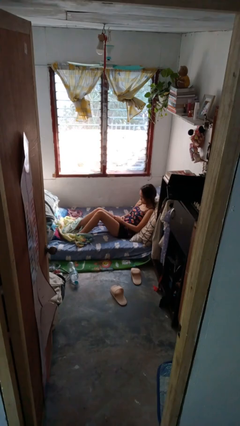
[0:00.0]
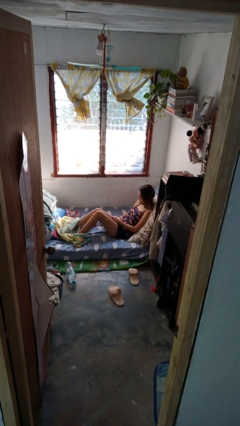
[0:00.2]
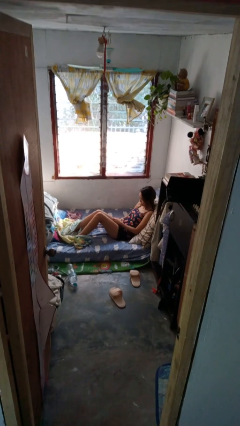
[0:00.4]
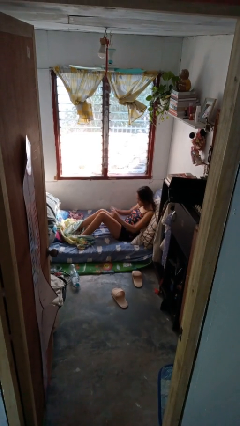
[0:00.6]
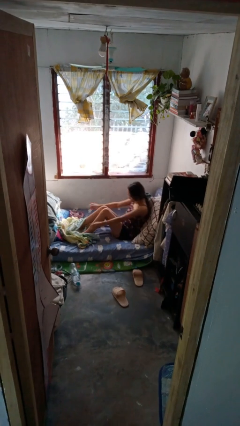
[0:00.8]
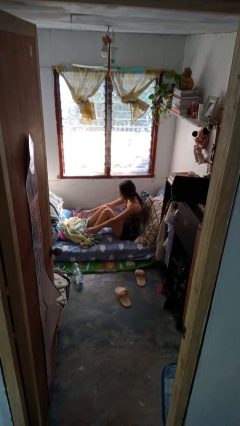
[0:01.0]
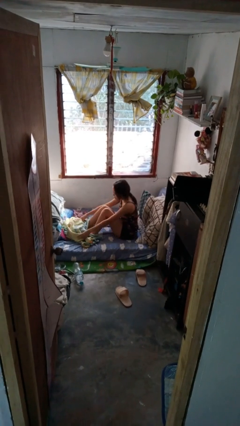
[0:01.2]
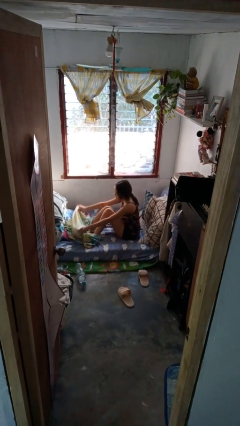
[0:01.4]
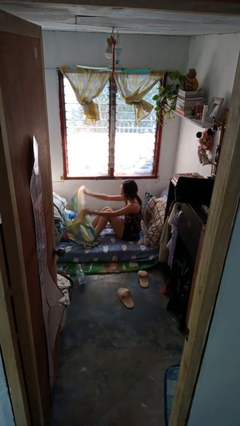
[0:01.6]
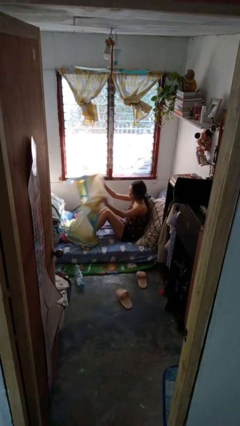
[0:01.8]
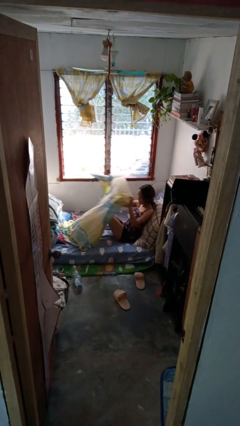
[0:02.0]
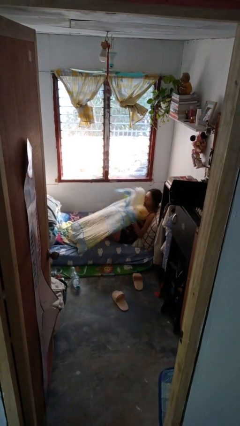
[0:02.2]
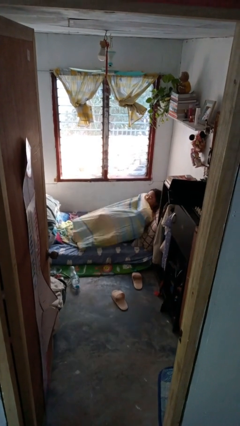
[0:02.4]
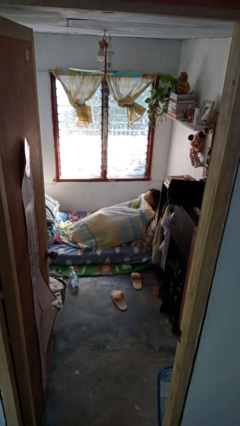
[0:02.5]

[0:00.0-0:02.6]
person covers with bedsheets

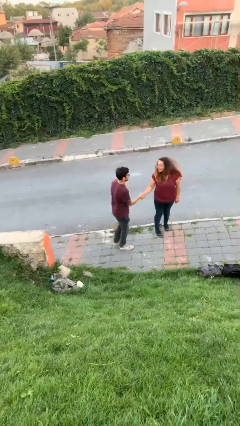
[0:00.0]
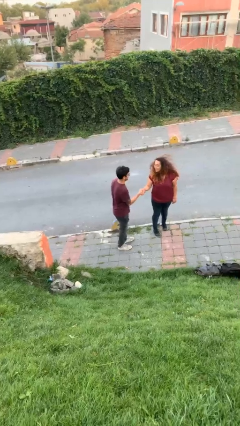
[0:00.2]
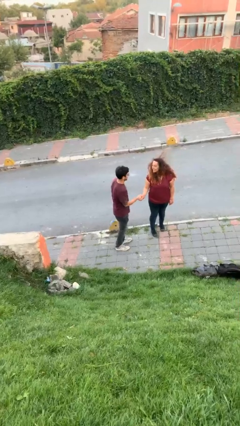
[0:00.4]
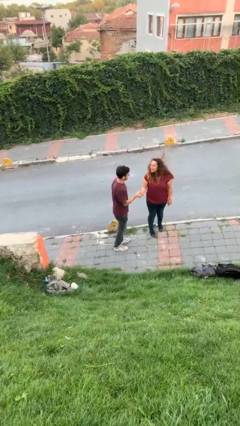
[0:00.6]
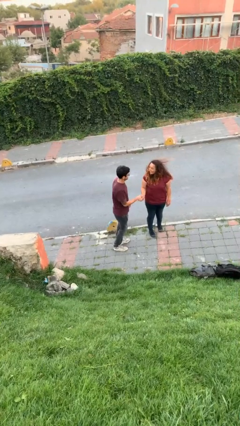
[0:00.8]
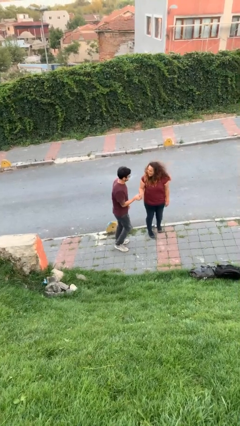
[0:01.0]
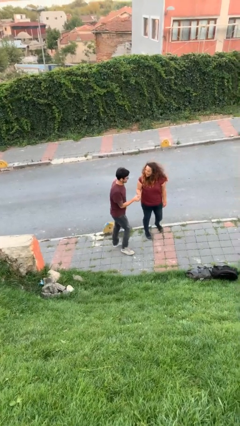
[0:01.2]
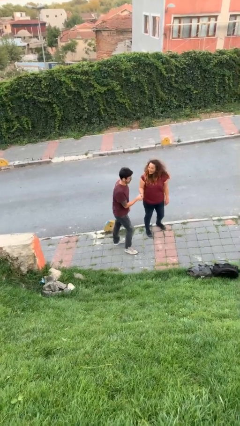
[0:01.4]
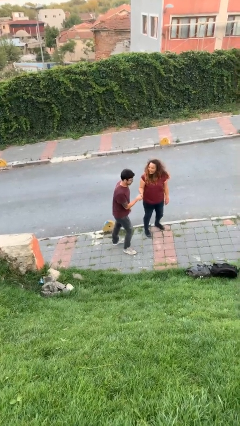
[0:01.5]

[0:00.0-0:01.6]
person shakes hand

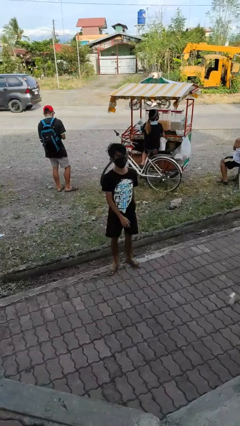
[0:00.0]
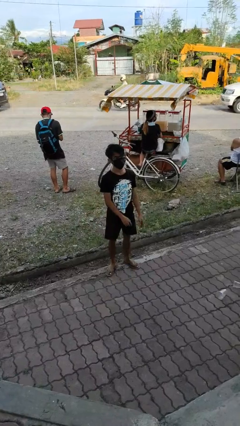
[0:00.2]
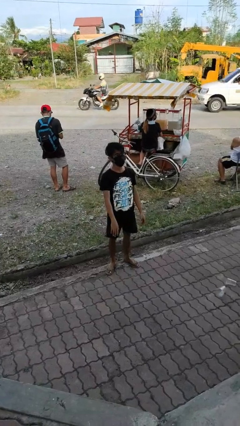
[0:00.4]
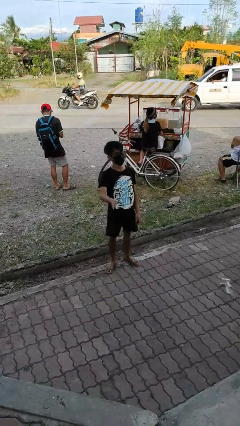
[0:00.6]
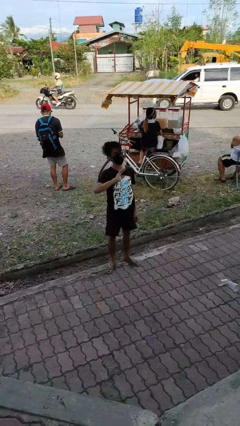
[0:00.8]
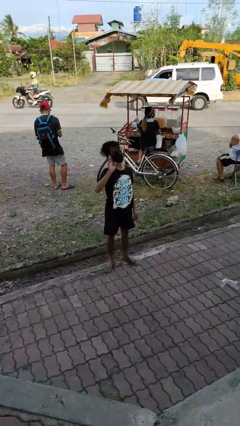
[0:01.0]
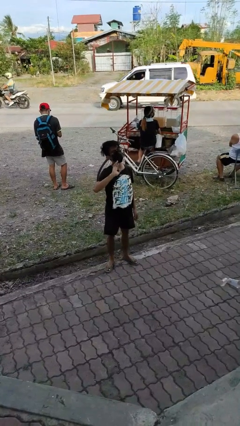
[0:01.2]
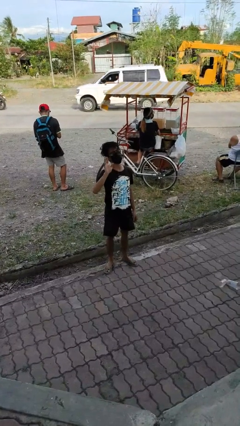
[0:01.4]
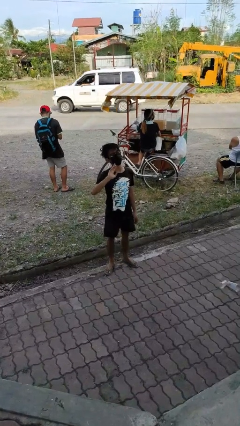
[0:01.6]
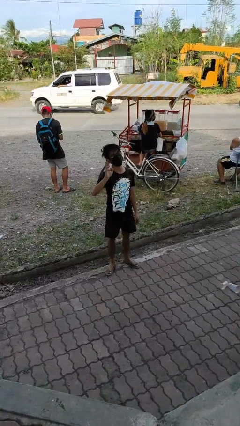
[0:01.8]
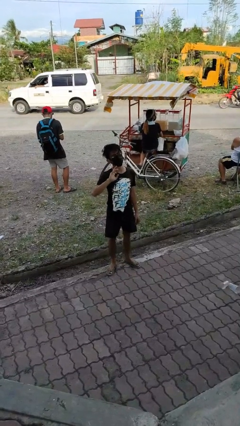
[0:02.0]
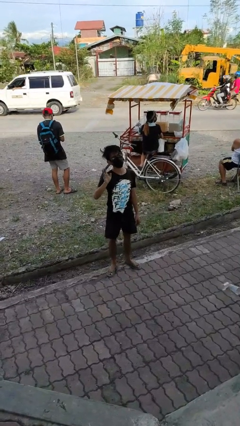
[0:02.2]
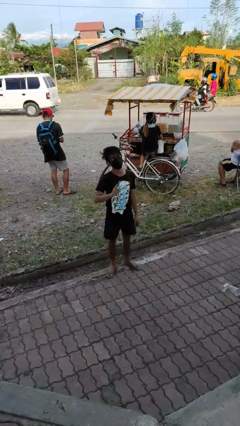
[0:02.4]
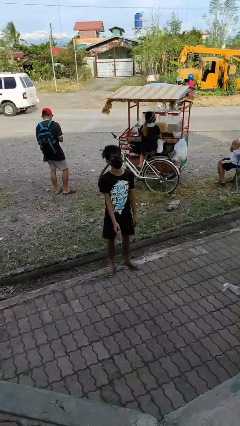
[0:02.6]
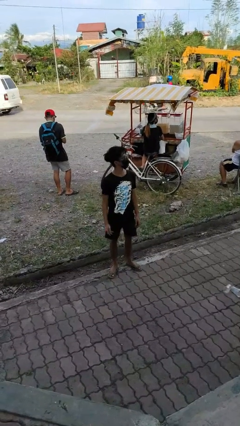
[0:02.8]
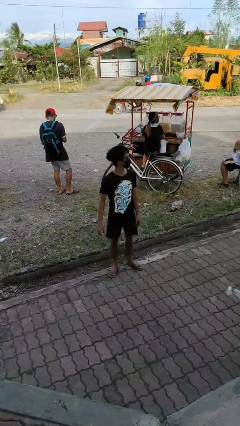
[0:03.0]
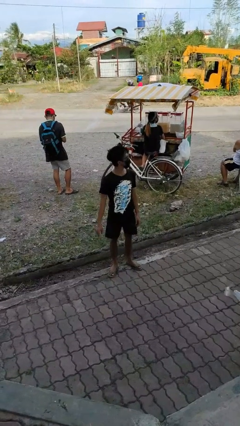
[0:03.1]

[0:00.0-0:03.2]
person waves at person

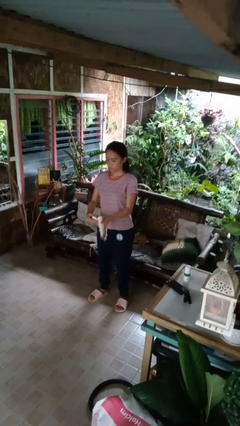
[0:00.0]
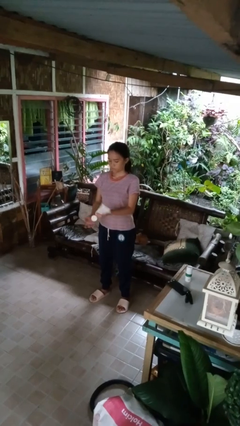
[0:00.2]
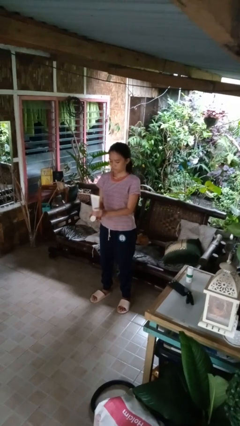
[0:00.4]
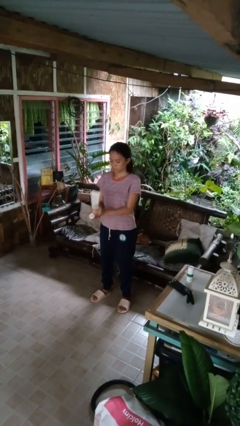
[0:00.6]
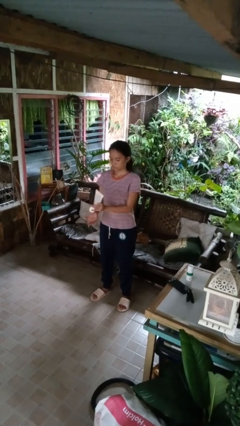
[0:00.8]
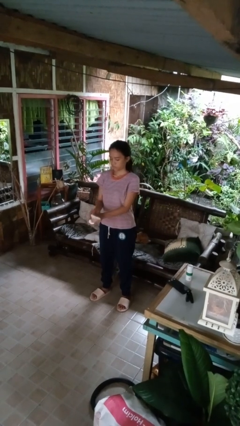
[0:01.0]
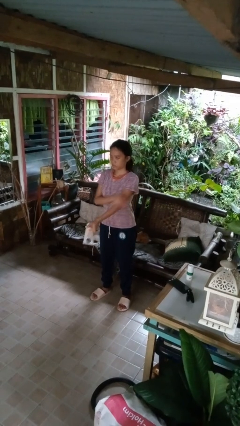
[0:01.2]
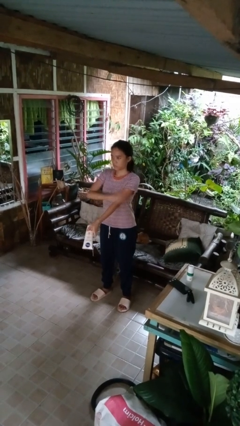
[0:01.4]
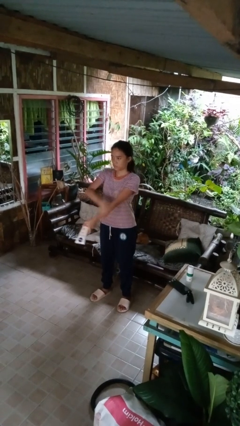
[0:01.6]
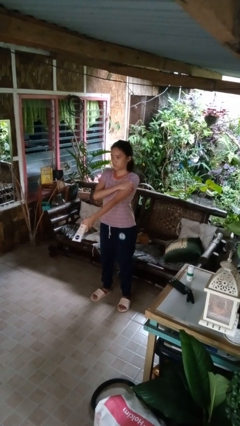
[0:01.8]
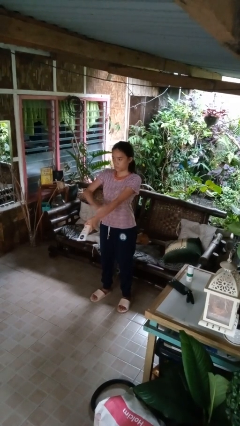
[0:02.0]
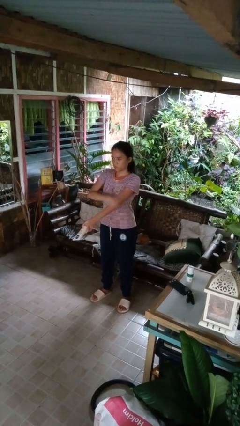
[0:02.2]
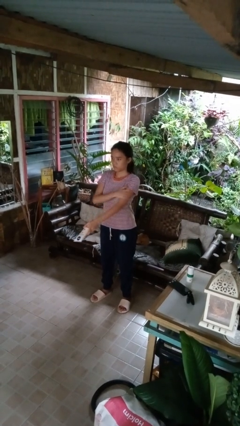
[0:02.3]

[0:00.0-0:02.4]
person applies sunscreen

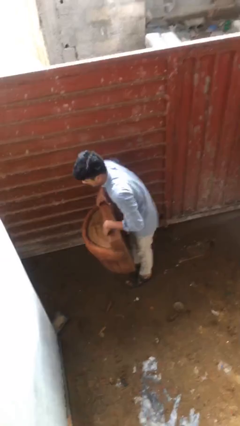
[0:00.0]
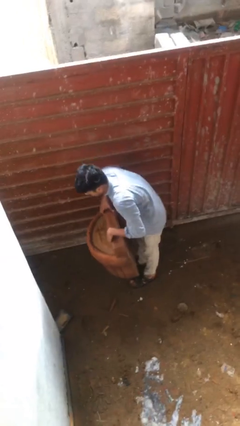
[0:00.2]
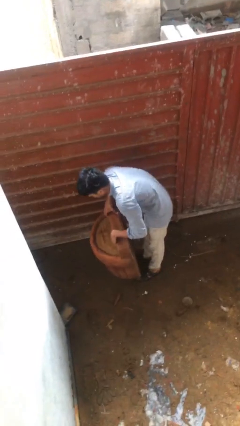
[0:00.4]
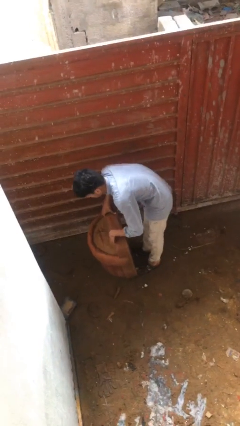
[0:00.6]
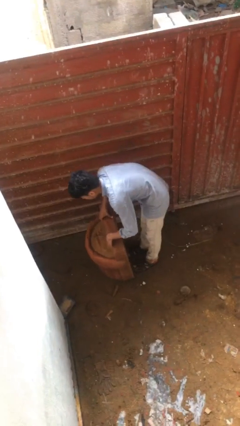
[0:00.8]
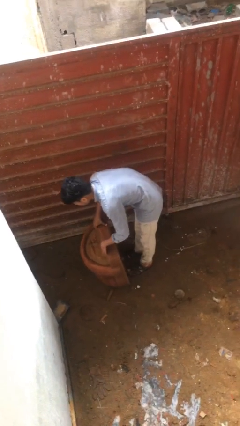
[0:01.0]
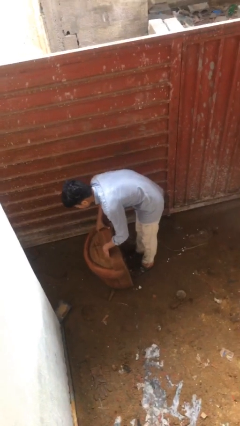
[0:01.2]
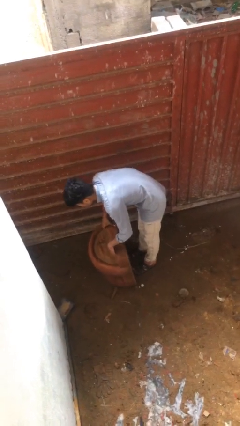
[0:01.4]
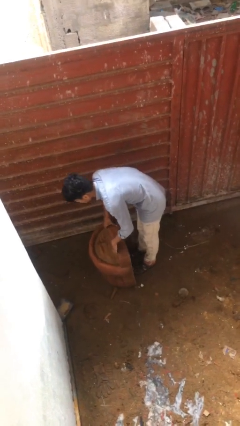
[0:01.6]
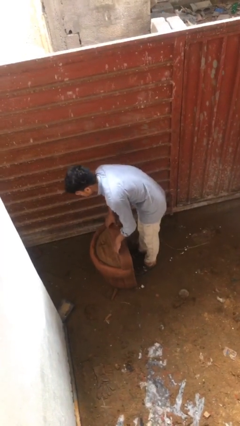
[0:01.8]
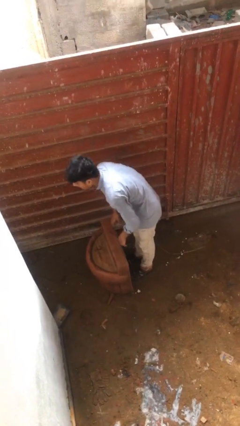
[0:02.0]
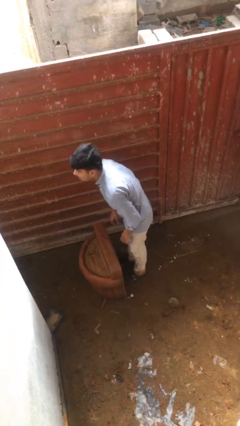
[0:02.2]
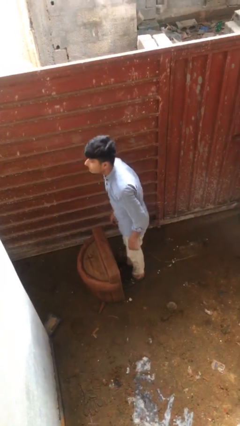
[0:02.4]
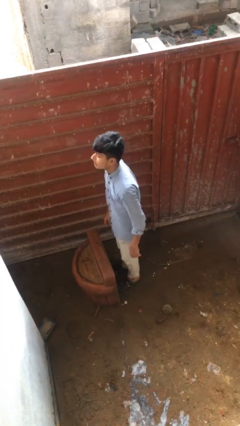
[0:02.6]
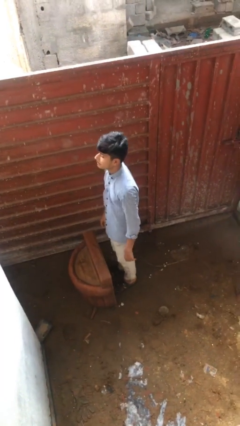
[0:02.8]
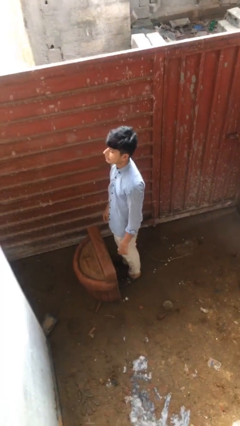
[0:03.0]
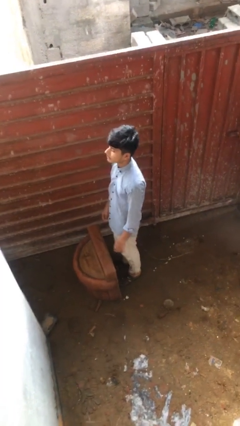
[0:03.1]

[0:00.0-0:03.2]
person puts down object on floor

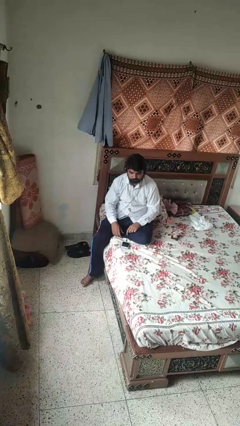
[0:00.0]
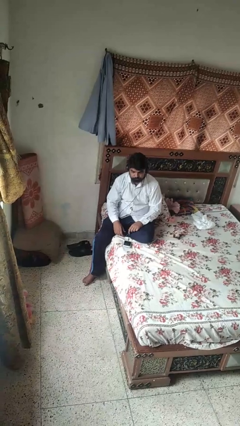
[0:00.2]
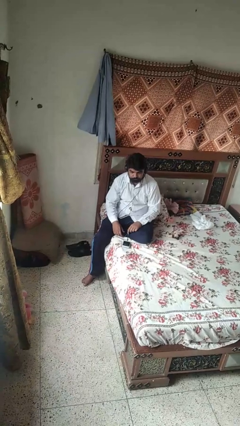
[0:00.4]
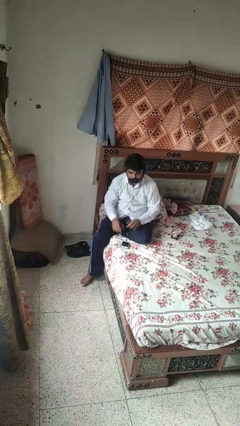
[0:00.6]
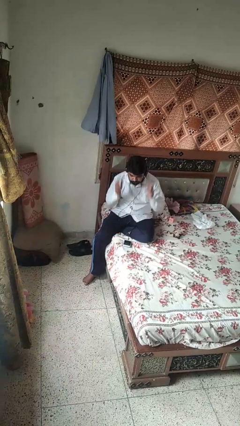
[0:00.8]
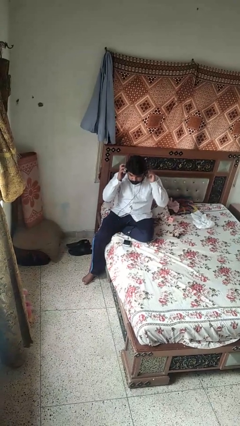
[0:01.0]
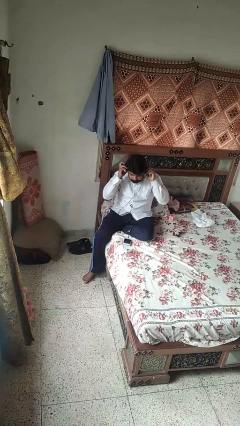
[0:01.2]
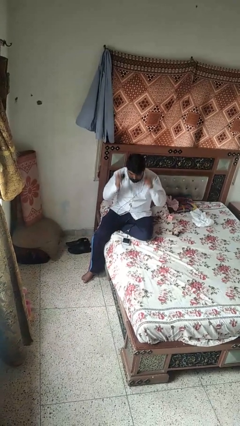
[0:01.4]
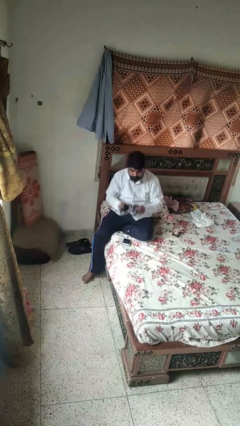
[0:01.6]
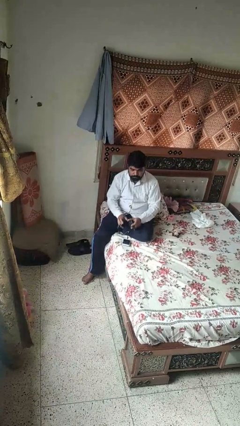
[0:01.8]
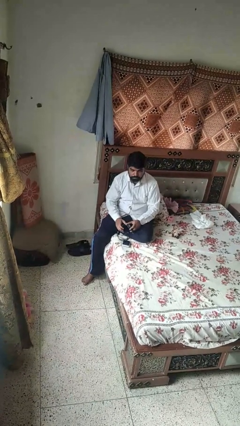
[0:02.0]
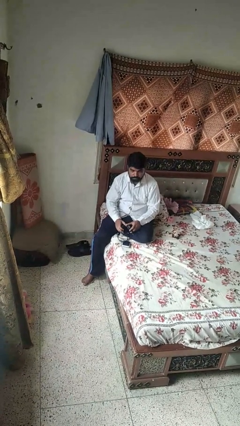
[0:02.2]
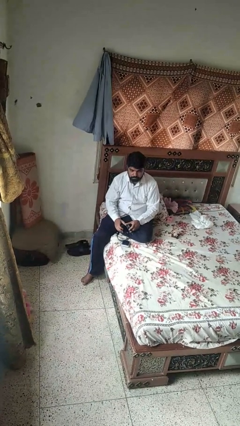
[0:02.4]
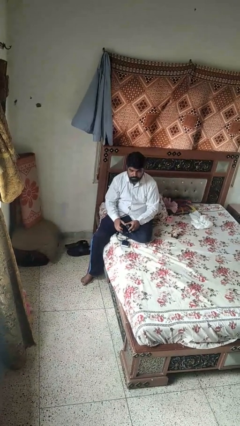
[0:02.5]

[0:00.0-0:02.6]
person takes off headphones

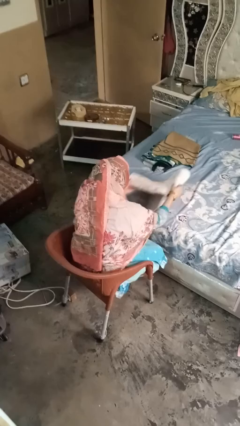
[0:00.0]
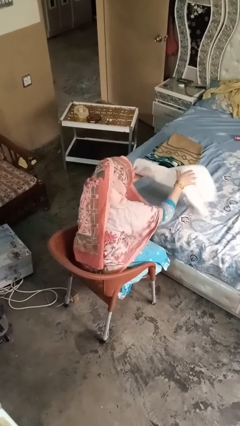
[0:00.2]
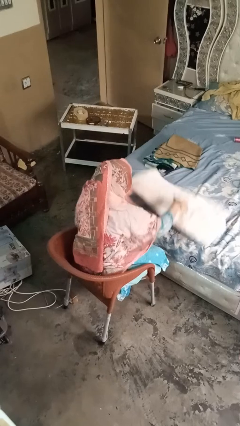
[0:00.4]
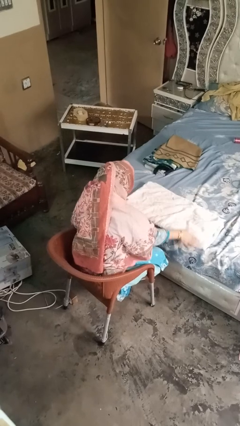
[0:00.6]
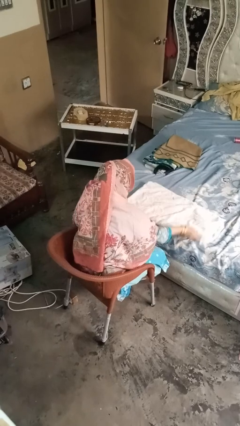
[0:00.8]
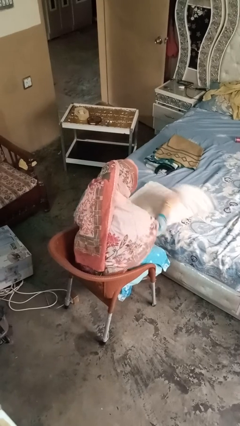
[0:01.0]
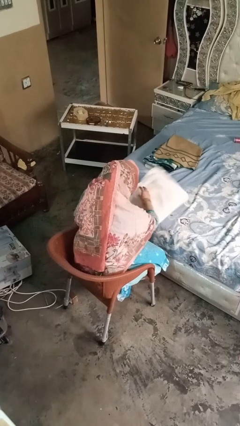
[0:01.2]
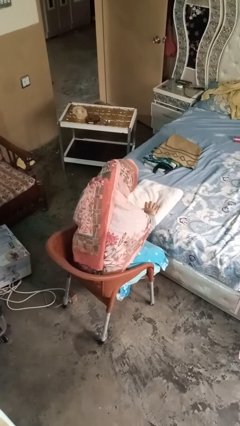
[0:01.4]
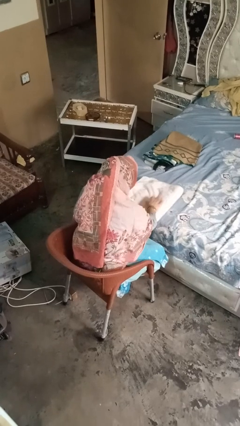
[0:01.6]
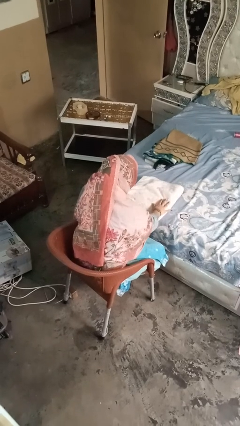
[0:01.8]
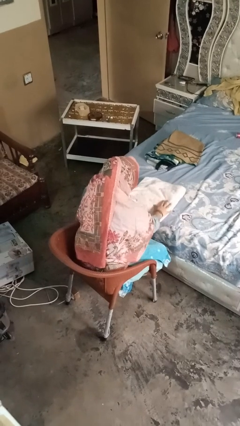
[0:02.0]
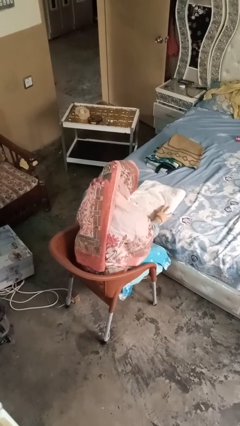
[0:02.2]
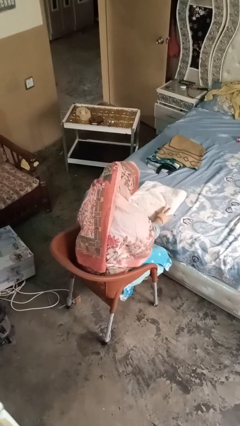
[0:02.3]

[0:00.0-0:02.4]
person folds towel
